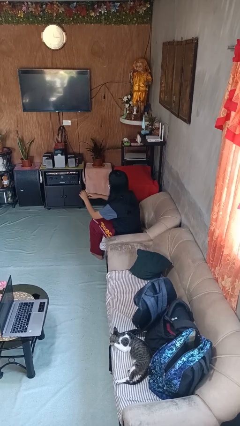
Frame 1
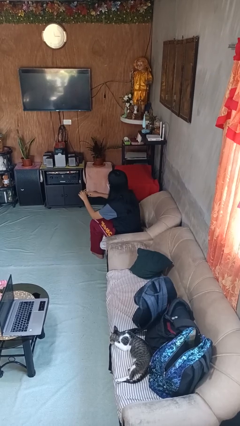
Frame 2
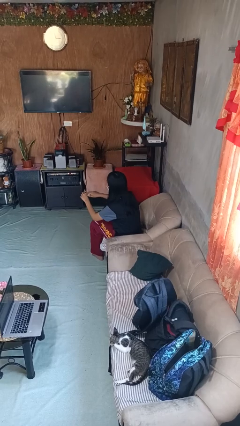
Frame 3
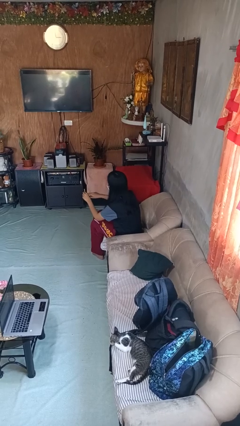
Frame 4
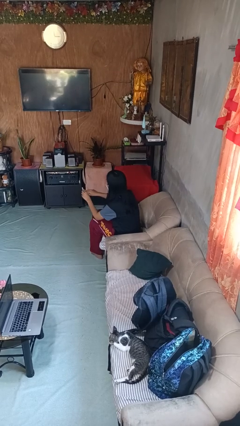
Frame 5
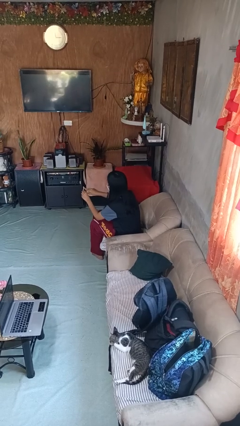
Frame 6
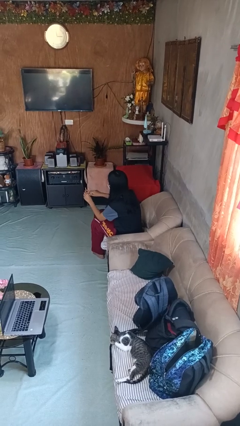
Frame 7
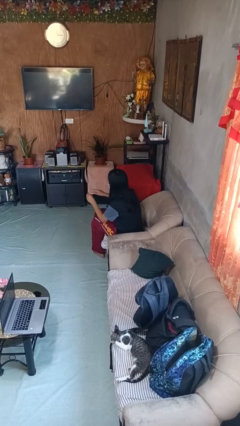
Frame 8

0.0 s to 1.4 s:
person files fingernails

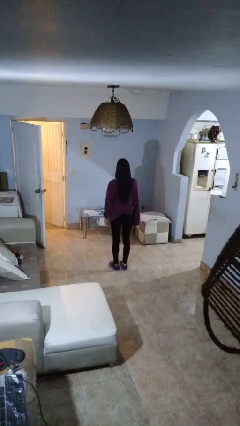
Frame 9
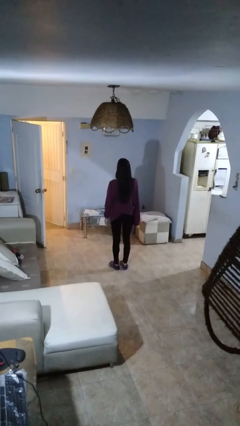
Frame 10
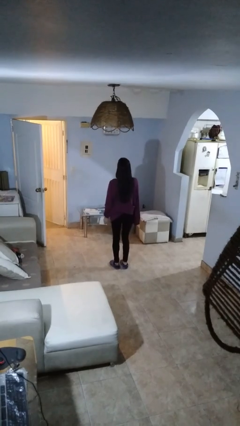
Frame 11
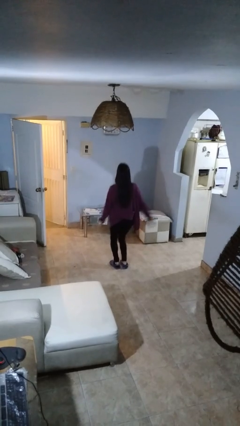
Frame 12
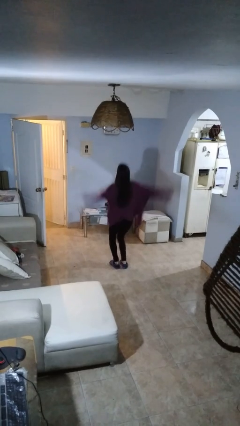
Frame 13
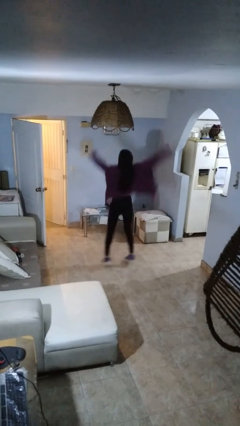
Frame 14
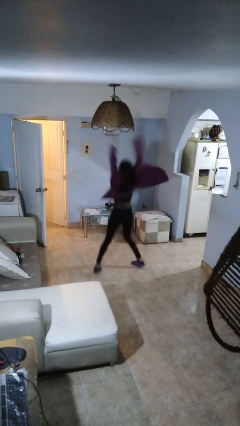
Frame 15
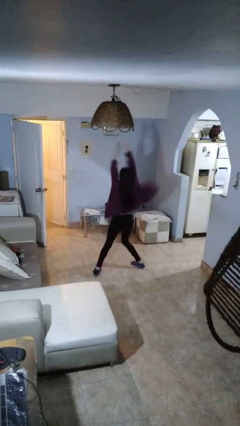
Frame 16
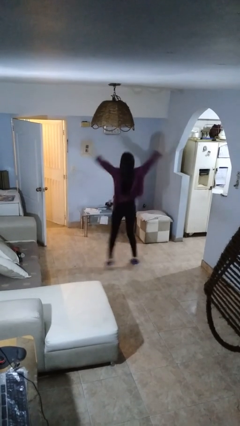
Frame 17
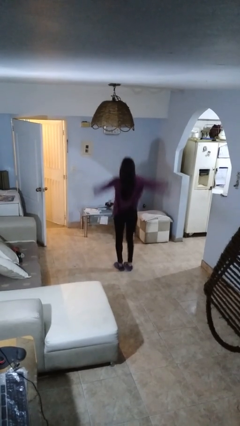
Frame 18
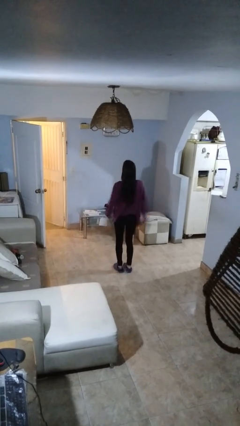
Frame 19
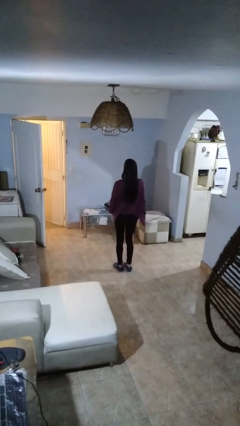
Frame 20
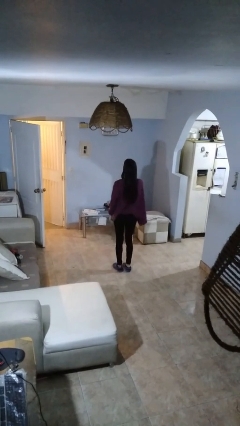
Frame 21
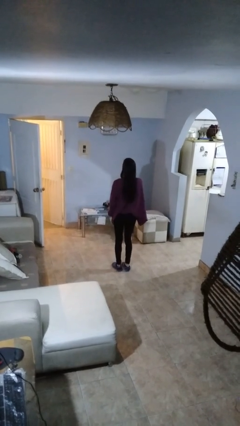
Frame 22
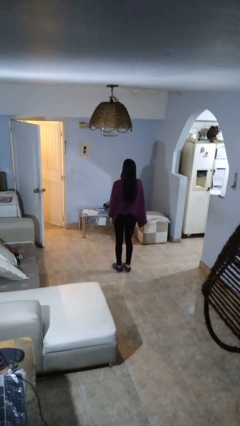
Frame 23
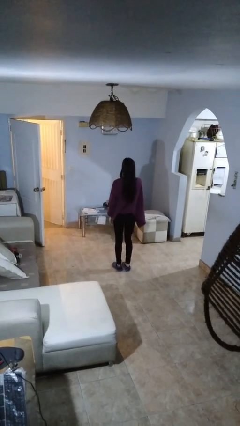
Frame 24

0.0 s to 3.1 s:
person exercises with jumping jacks

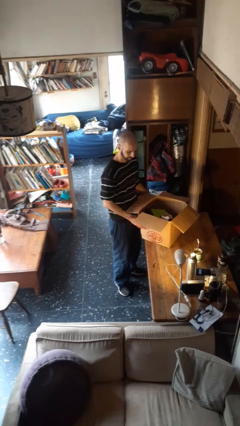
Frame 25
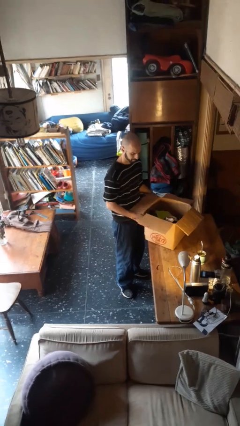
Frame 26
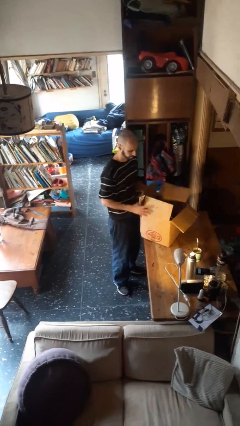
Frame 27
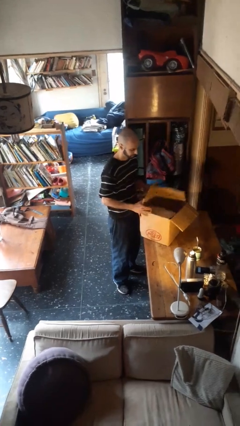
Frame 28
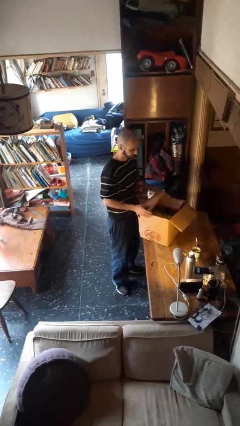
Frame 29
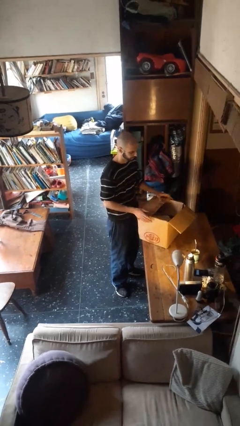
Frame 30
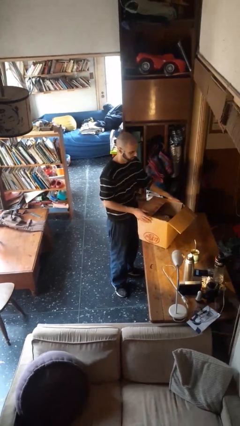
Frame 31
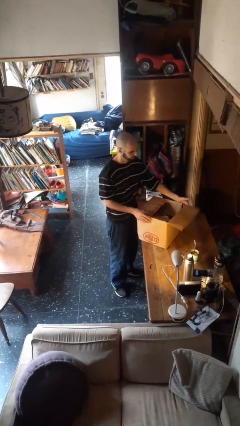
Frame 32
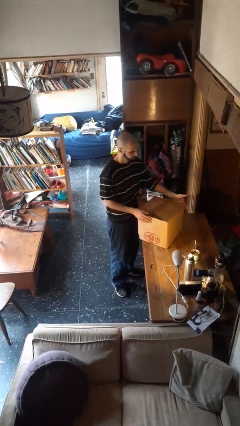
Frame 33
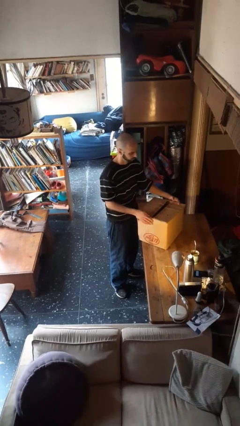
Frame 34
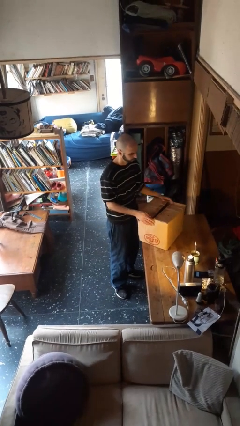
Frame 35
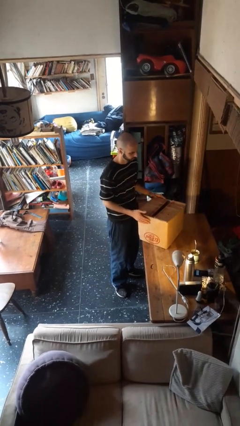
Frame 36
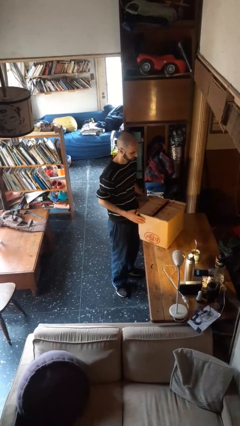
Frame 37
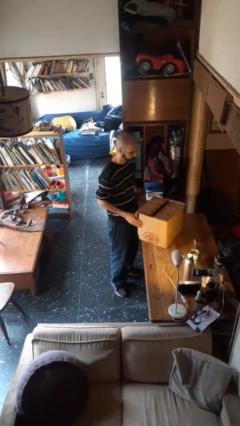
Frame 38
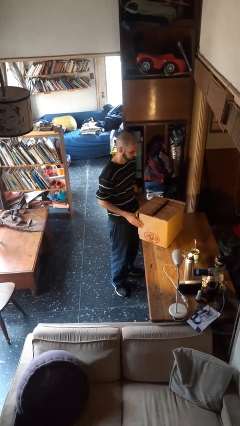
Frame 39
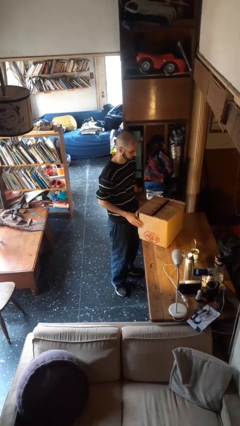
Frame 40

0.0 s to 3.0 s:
person closes box

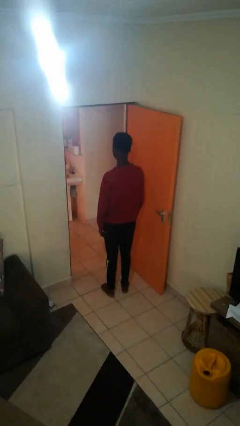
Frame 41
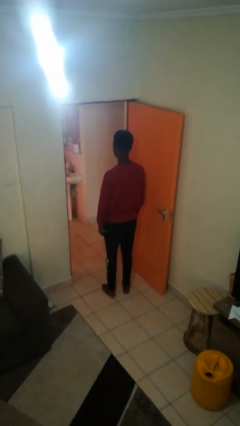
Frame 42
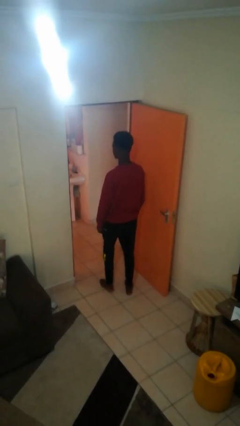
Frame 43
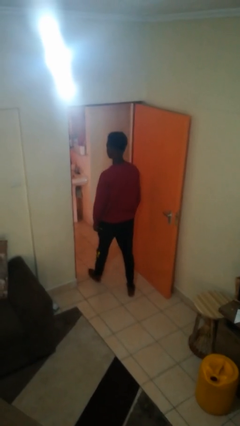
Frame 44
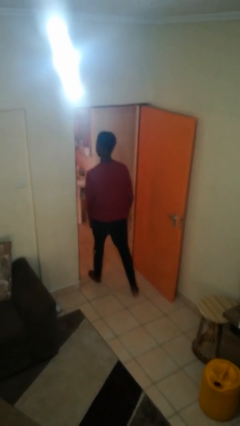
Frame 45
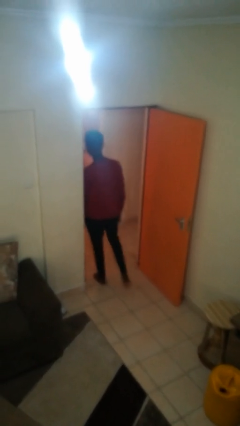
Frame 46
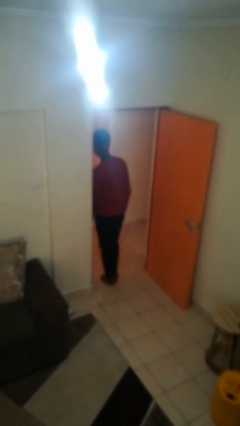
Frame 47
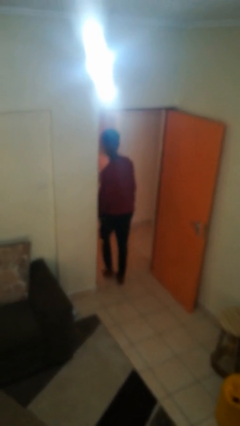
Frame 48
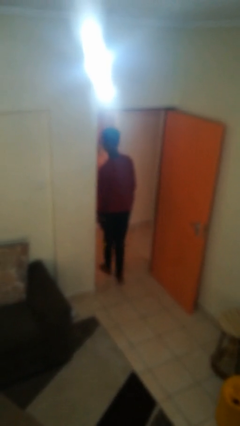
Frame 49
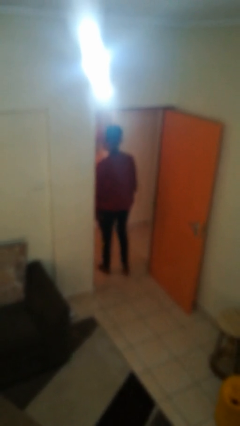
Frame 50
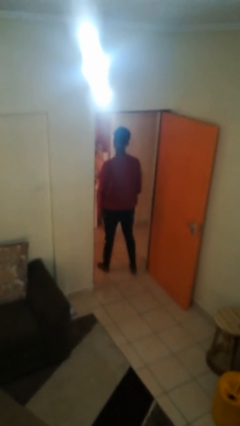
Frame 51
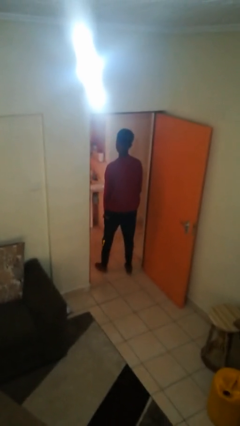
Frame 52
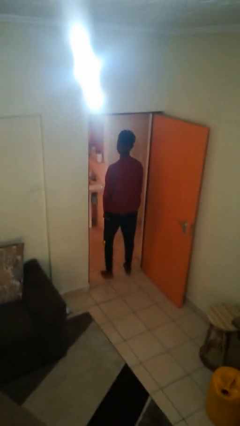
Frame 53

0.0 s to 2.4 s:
person bumps into wall

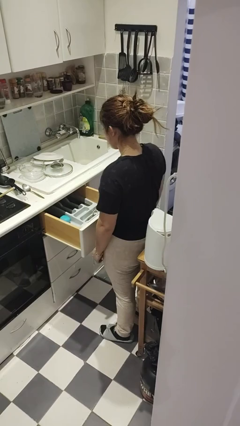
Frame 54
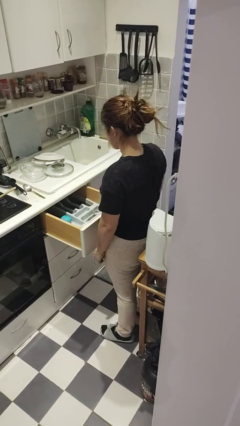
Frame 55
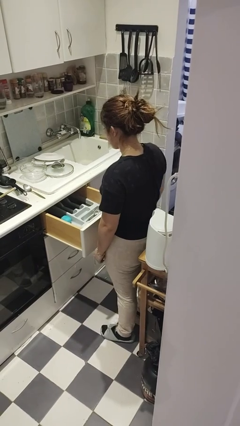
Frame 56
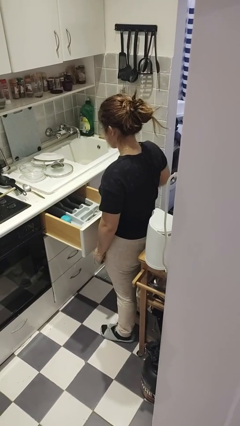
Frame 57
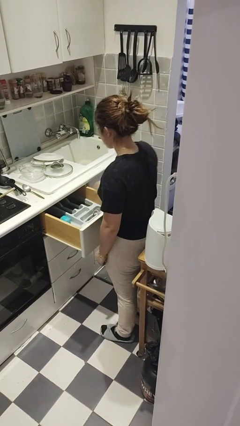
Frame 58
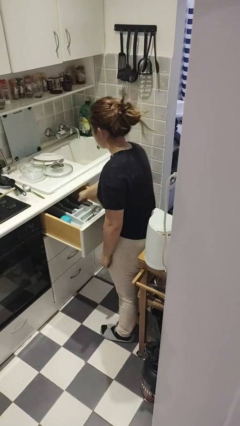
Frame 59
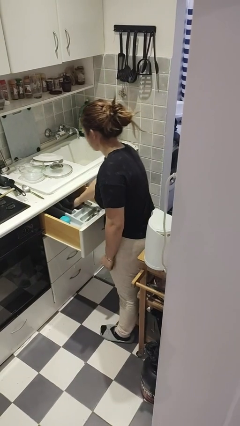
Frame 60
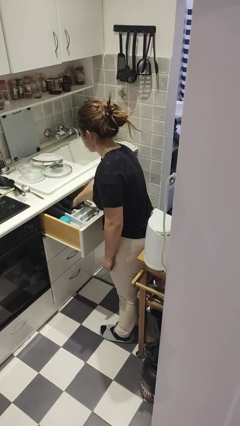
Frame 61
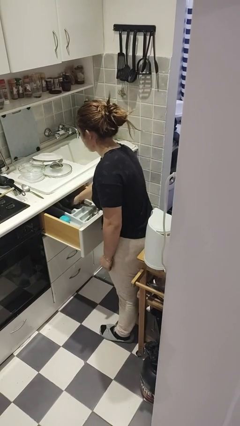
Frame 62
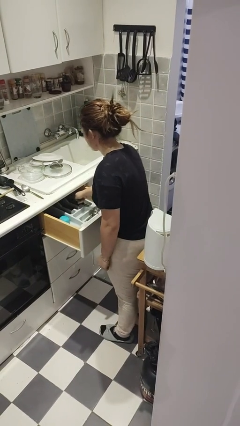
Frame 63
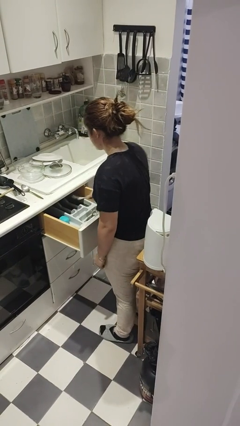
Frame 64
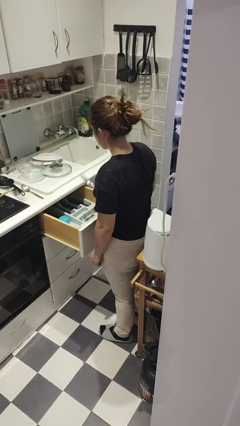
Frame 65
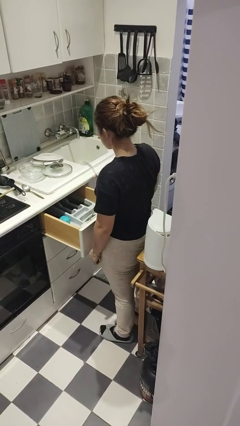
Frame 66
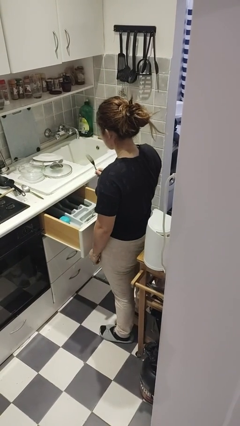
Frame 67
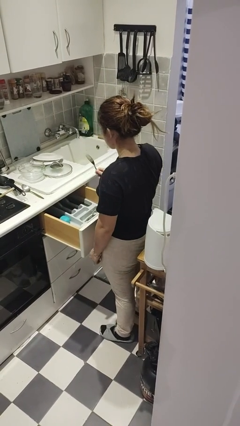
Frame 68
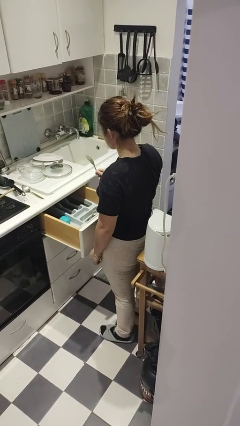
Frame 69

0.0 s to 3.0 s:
person takes object from kitchen drawer

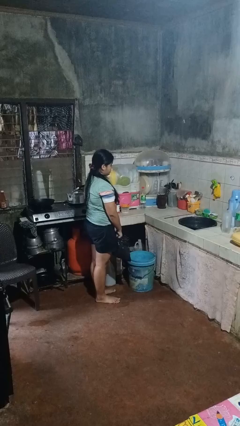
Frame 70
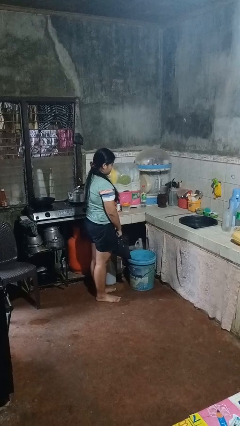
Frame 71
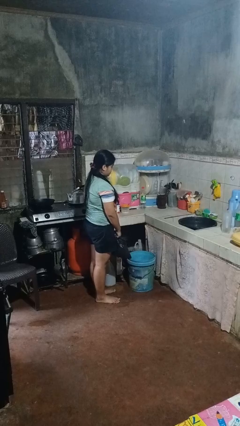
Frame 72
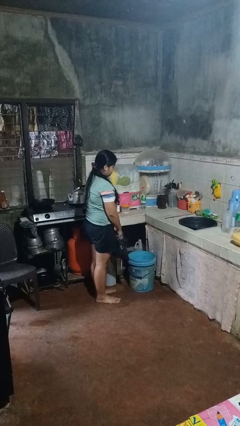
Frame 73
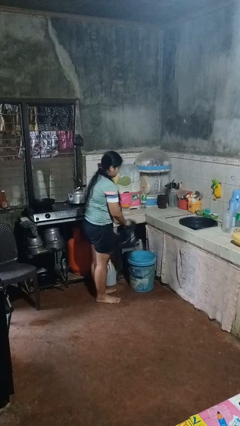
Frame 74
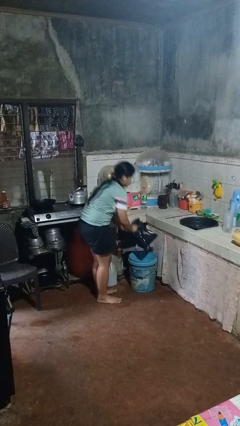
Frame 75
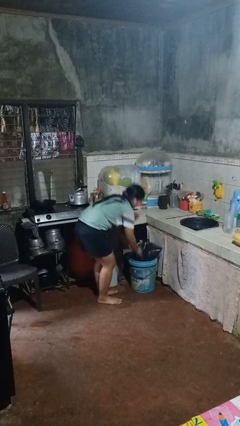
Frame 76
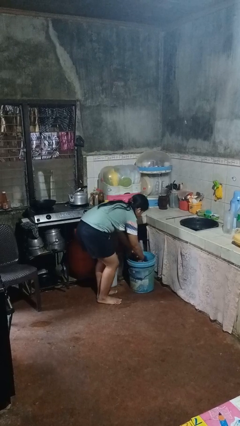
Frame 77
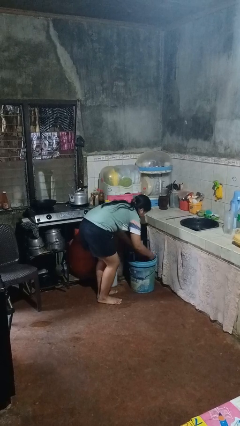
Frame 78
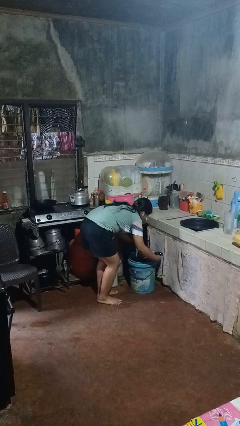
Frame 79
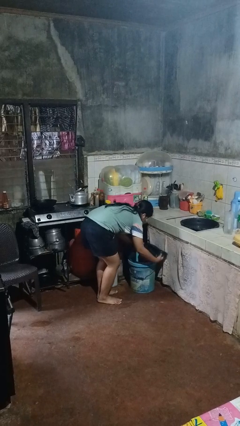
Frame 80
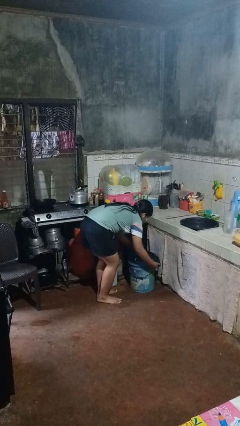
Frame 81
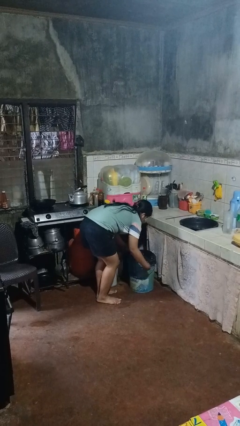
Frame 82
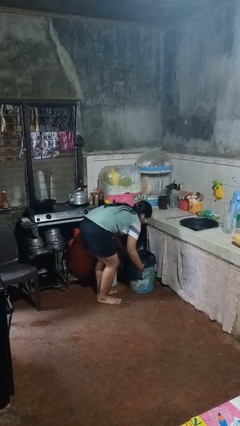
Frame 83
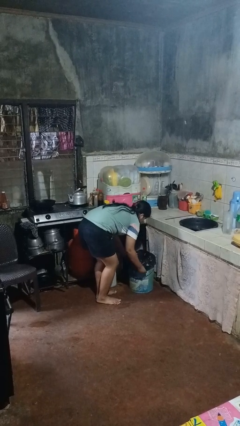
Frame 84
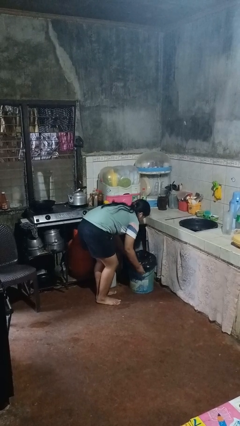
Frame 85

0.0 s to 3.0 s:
person inserts trashbag into trashcan

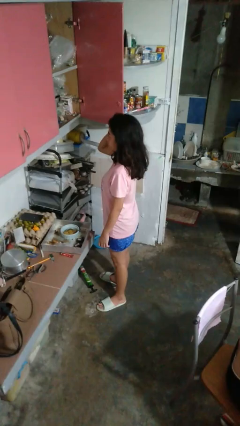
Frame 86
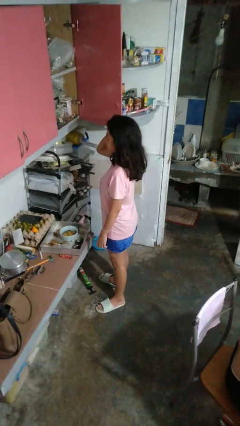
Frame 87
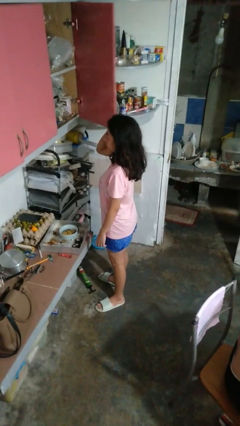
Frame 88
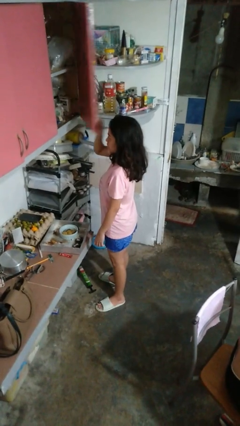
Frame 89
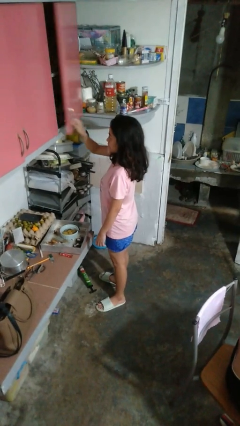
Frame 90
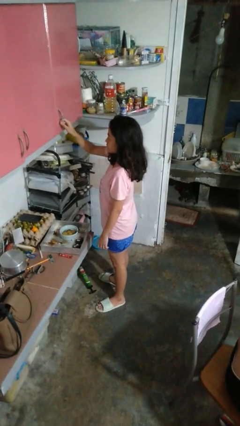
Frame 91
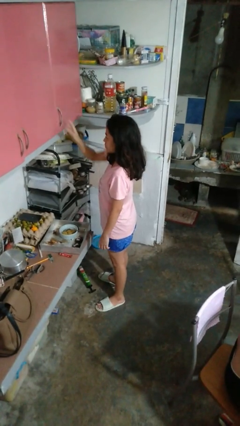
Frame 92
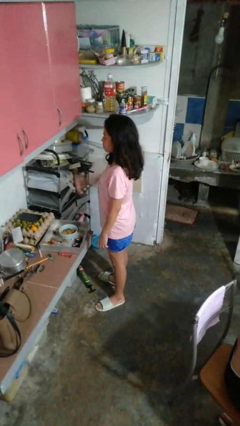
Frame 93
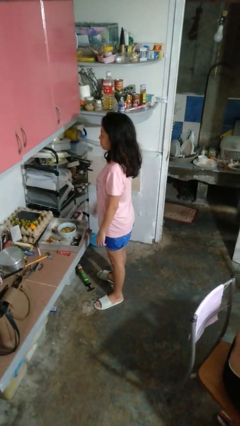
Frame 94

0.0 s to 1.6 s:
person closes cabinet
